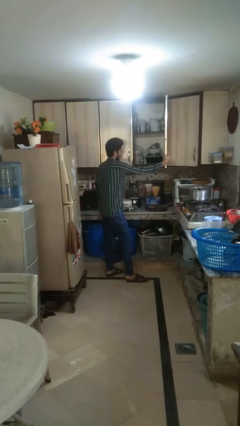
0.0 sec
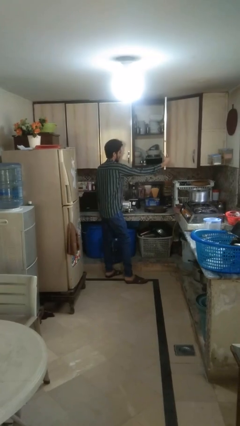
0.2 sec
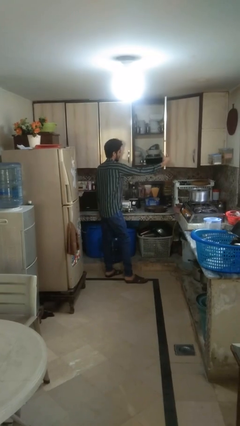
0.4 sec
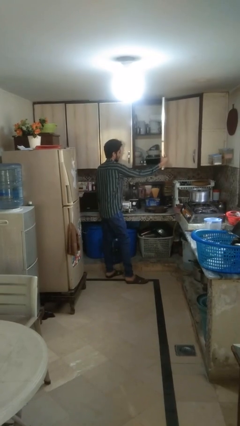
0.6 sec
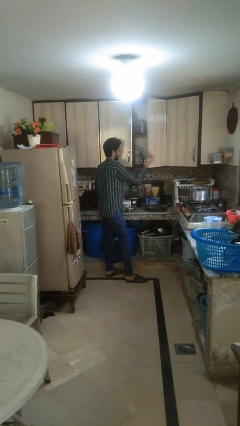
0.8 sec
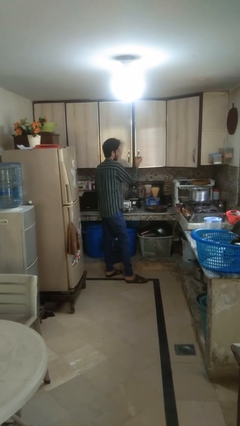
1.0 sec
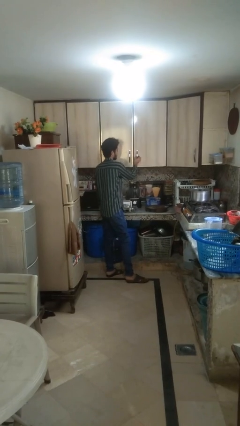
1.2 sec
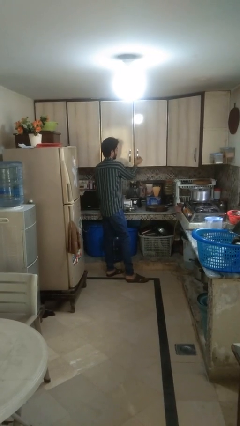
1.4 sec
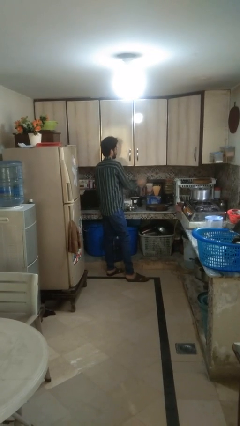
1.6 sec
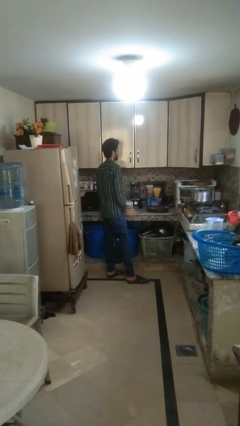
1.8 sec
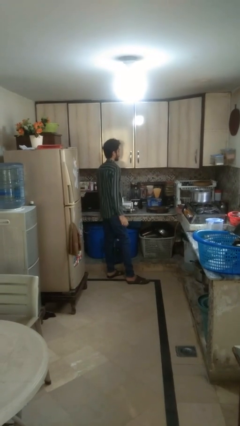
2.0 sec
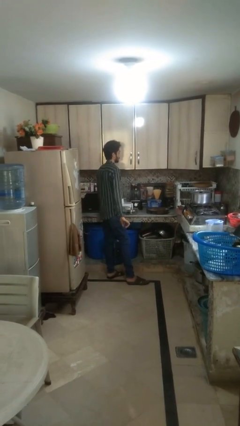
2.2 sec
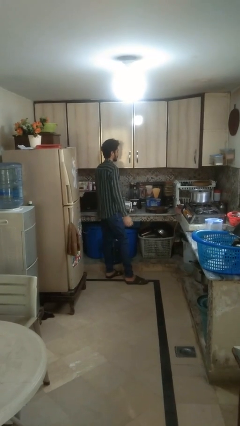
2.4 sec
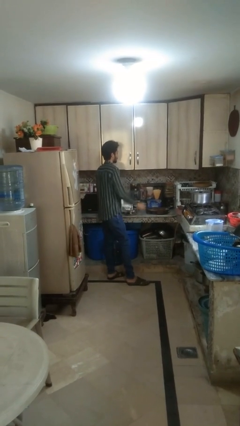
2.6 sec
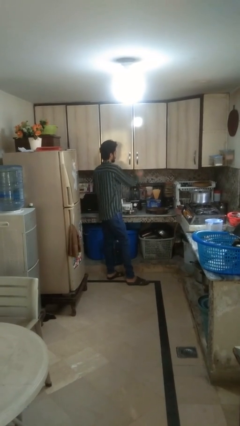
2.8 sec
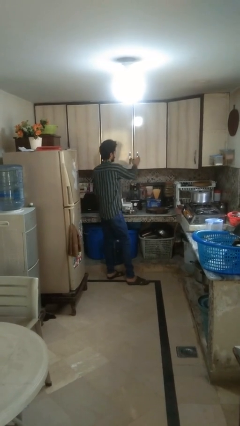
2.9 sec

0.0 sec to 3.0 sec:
person closes cabinet

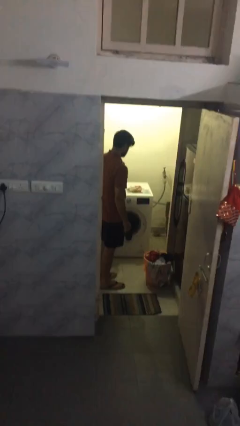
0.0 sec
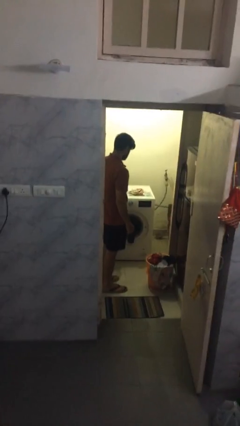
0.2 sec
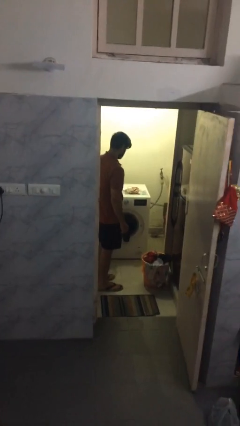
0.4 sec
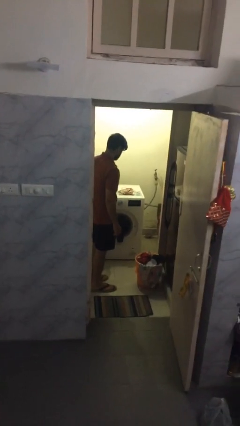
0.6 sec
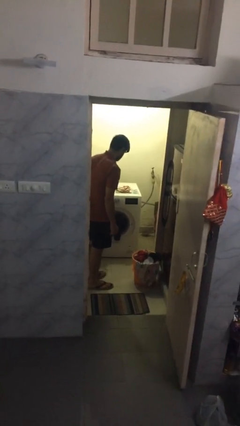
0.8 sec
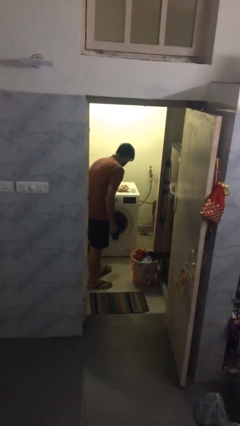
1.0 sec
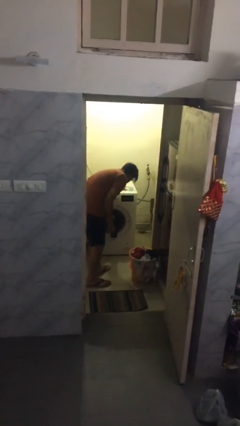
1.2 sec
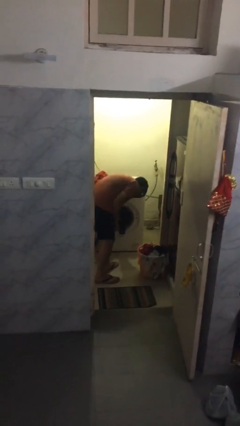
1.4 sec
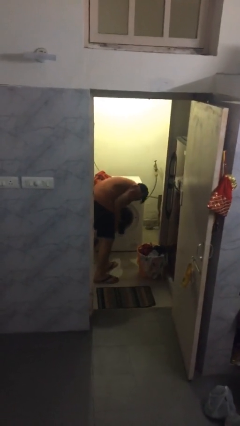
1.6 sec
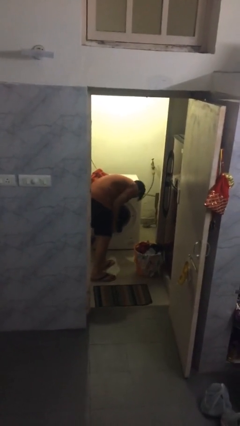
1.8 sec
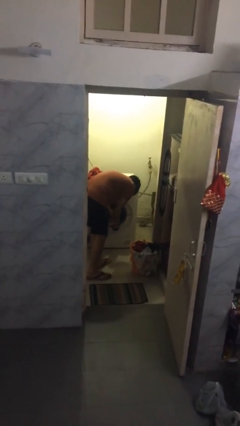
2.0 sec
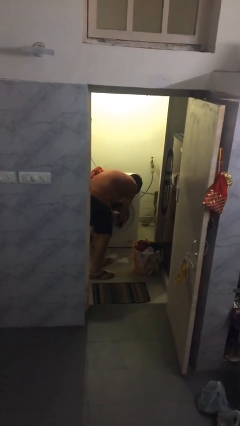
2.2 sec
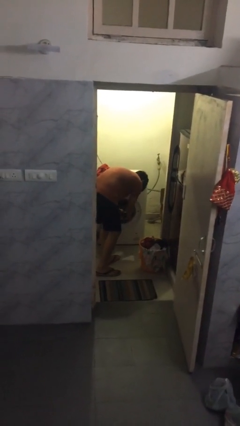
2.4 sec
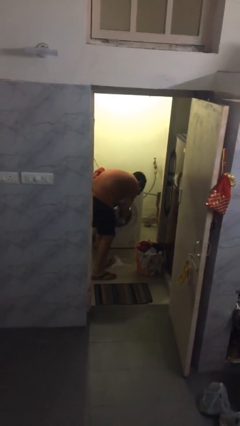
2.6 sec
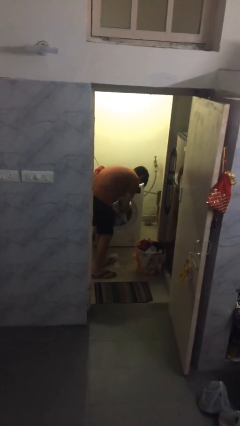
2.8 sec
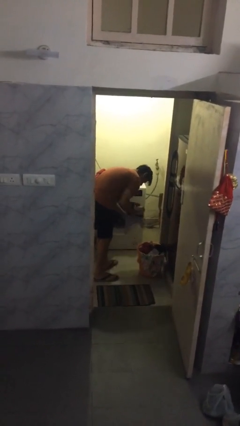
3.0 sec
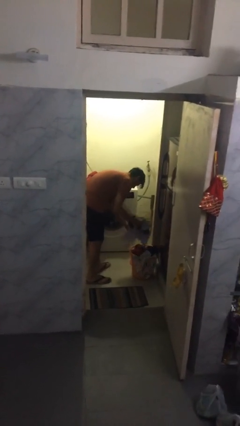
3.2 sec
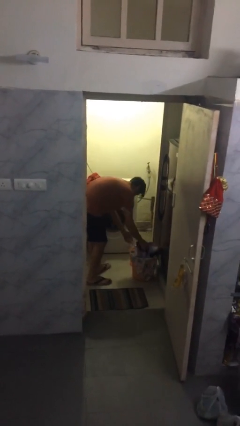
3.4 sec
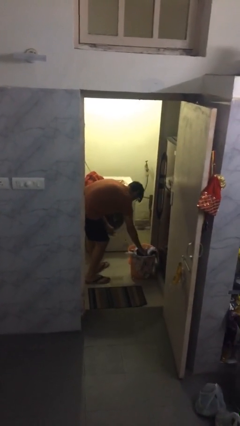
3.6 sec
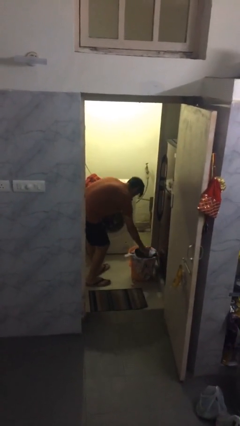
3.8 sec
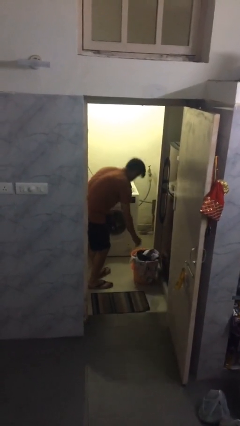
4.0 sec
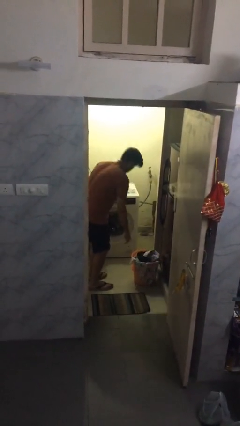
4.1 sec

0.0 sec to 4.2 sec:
person unloads clotheswasher

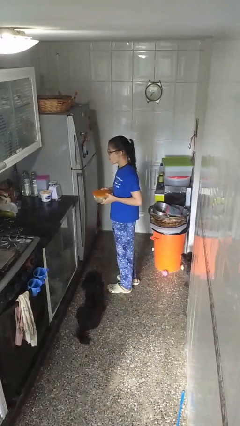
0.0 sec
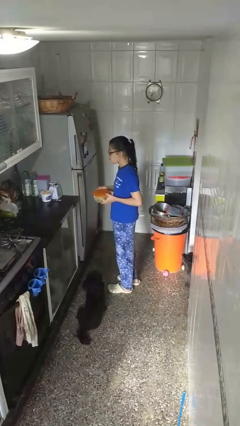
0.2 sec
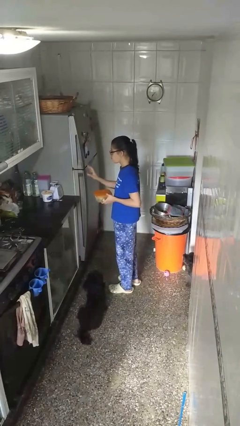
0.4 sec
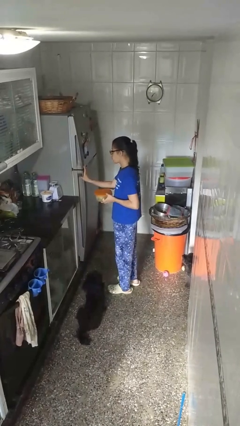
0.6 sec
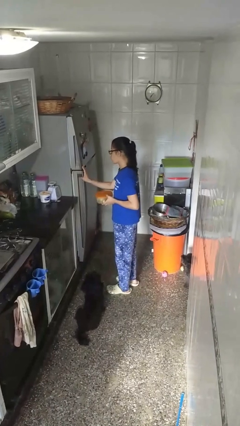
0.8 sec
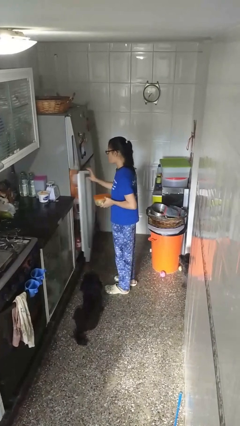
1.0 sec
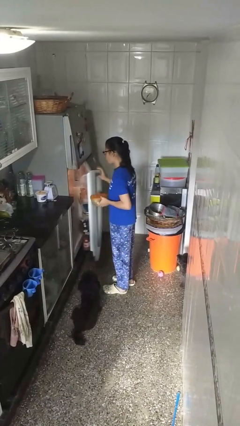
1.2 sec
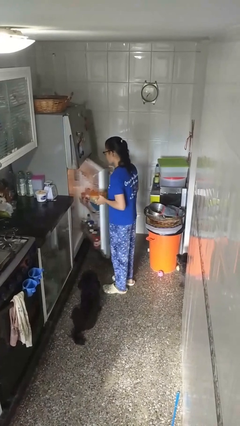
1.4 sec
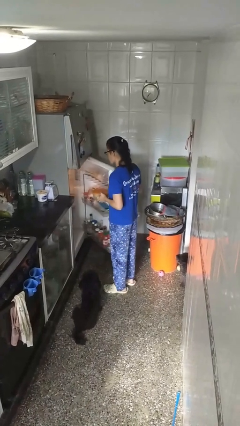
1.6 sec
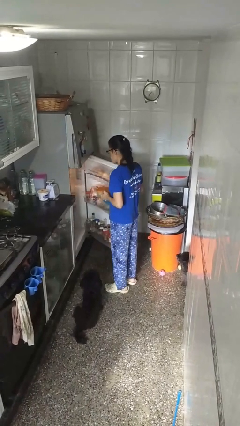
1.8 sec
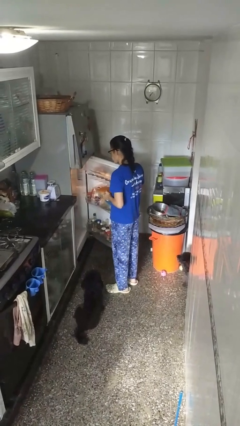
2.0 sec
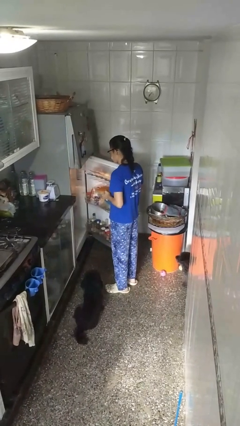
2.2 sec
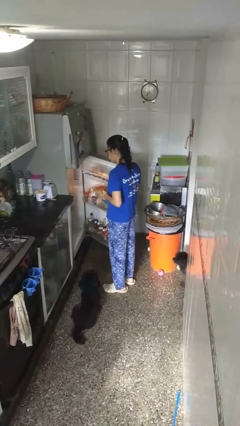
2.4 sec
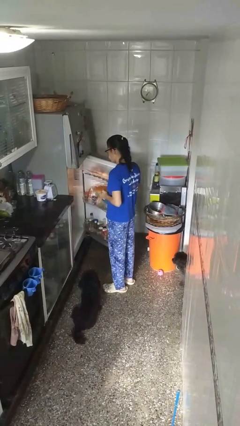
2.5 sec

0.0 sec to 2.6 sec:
person opens refrigerator

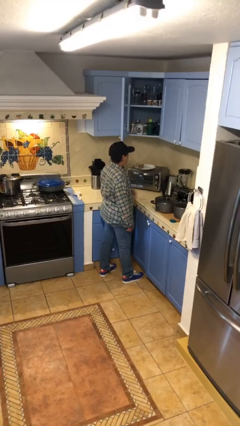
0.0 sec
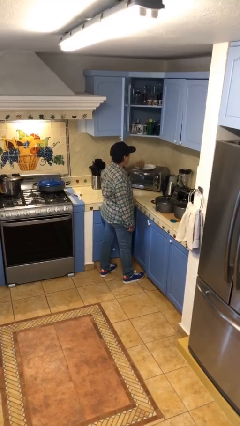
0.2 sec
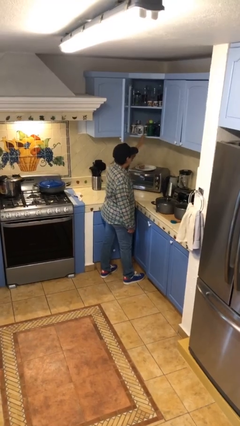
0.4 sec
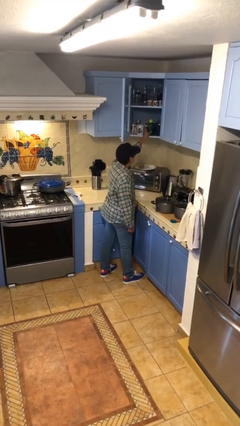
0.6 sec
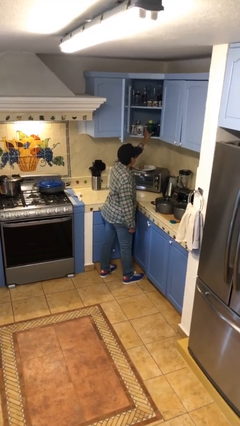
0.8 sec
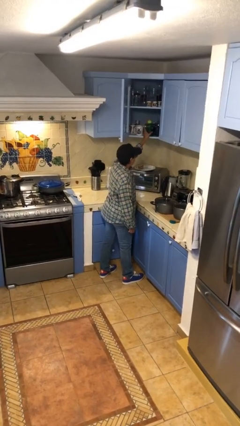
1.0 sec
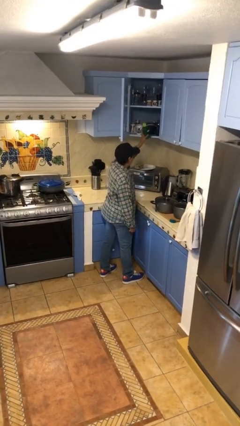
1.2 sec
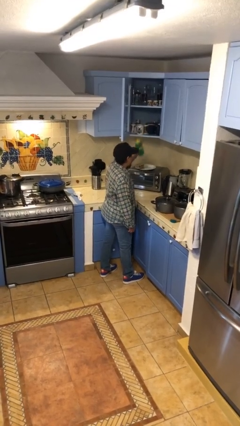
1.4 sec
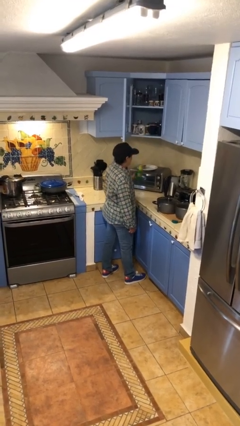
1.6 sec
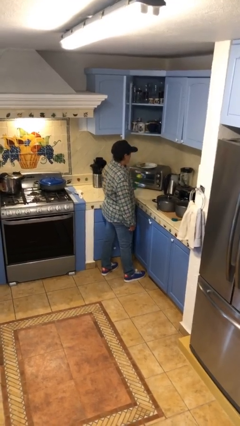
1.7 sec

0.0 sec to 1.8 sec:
person picks up object from cabinet

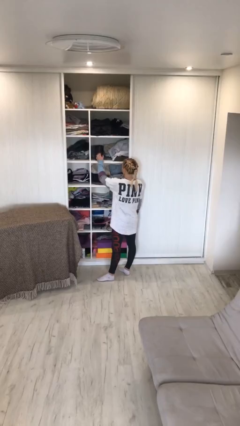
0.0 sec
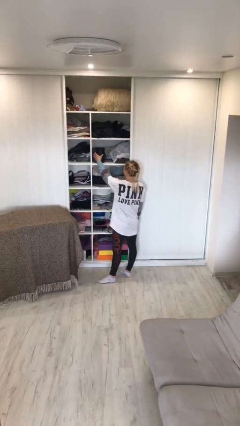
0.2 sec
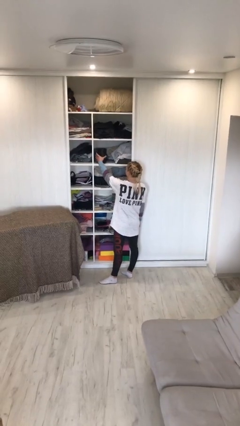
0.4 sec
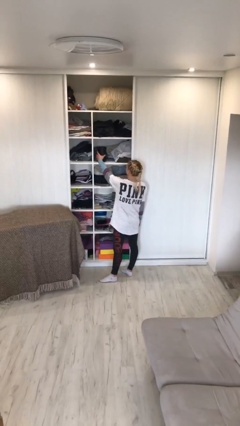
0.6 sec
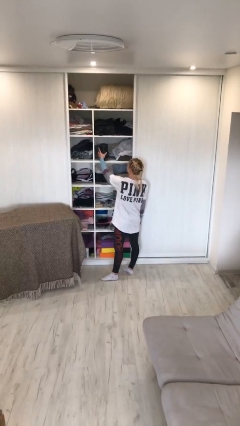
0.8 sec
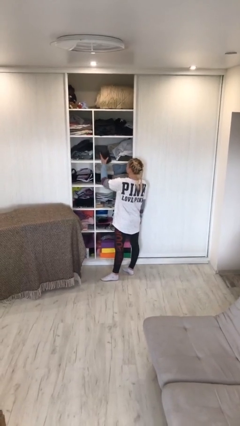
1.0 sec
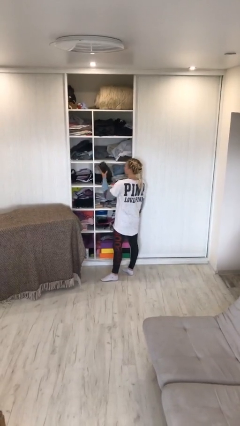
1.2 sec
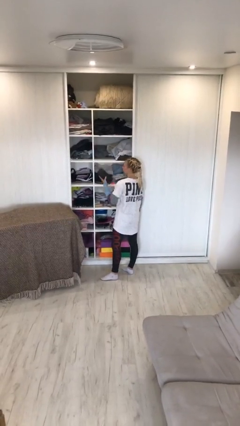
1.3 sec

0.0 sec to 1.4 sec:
person picks up object from shelf

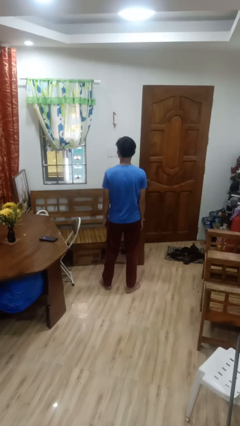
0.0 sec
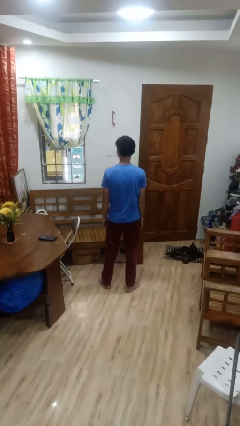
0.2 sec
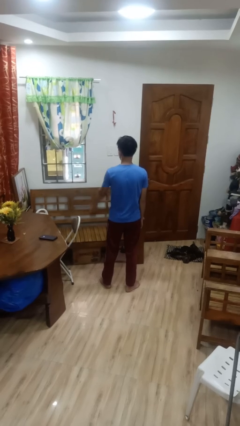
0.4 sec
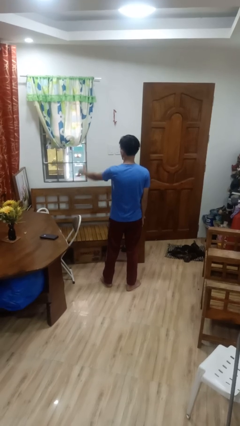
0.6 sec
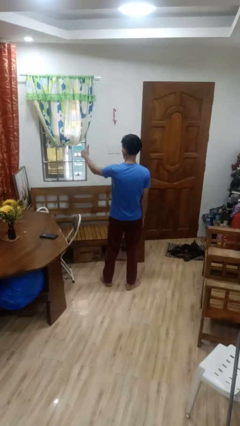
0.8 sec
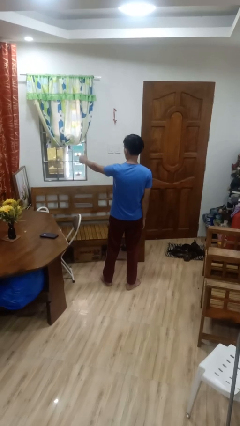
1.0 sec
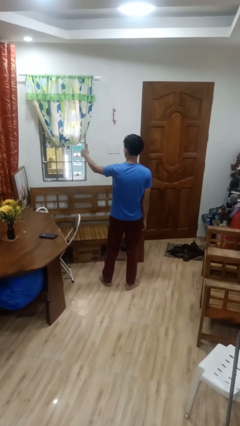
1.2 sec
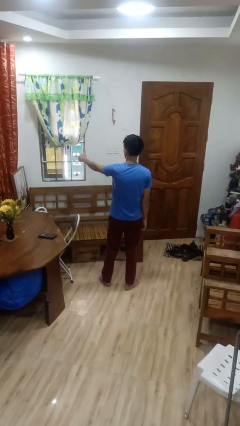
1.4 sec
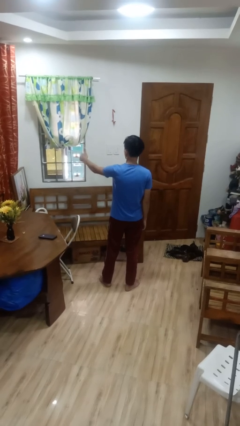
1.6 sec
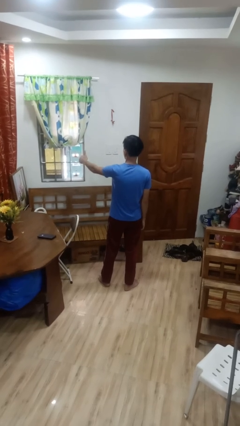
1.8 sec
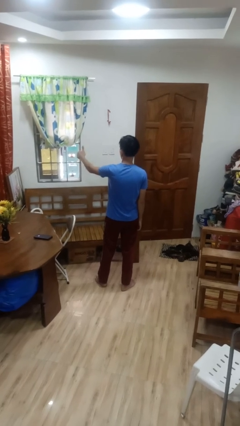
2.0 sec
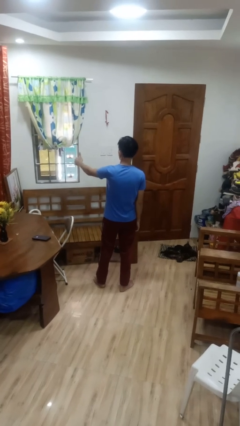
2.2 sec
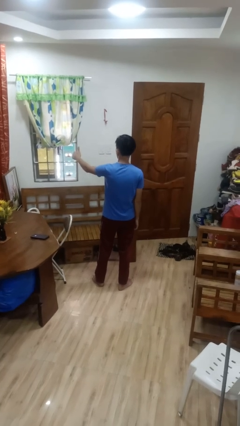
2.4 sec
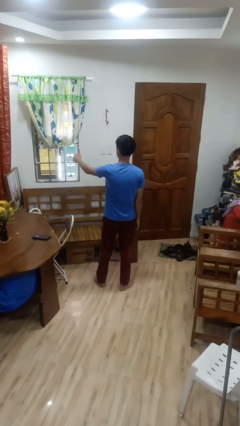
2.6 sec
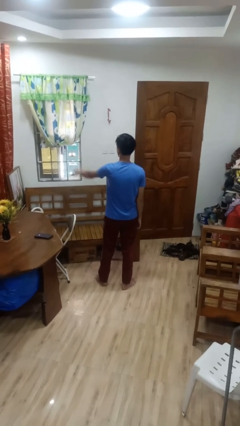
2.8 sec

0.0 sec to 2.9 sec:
person gestures thumbs up

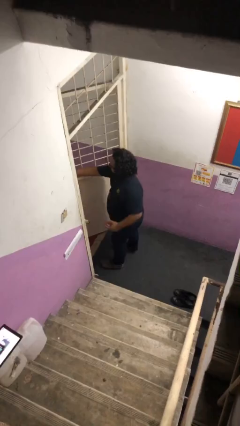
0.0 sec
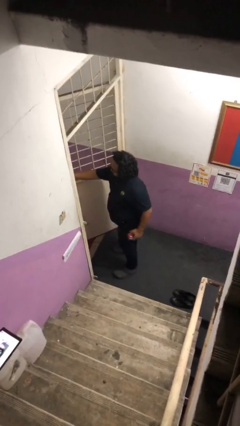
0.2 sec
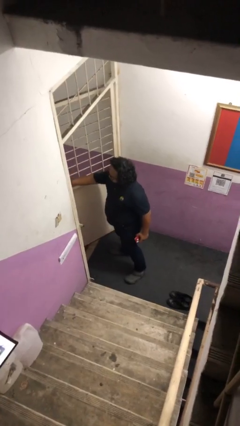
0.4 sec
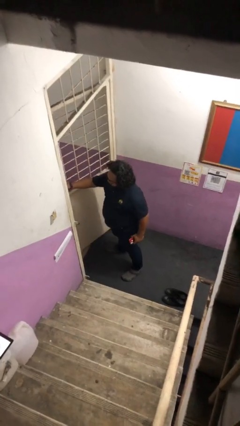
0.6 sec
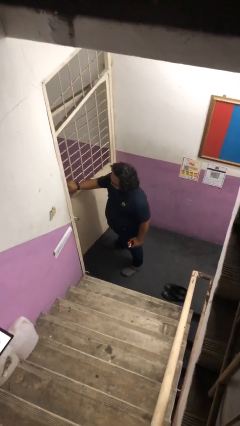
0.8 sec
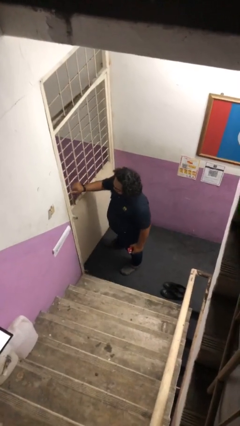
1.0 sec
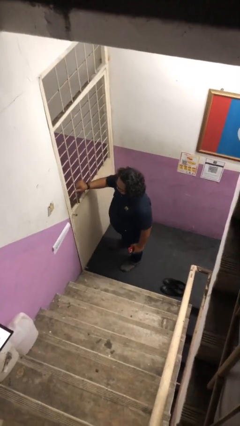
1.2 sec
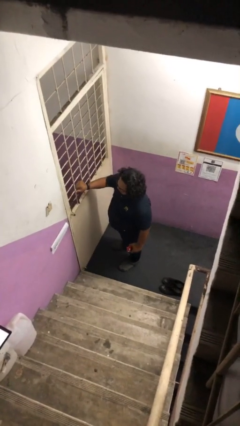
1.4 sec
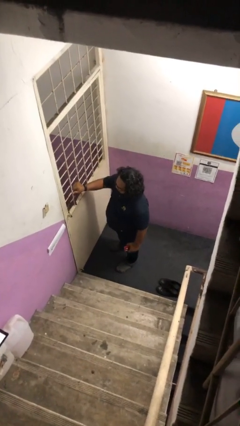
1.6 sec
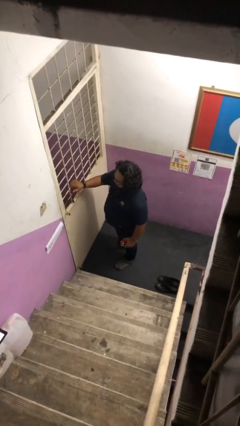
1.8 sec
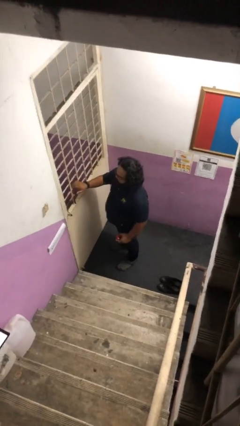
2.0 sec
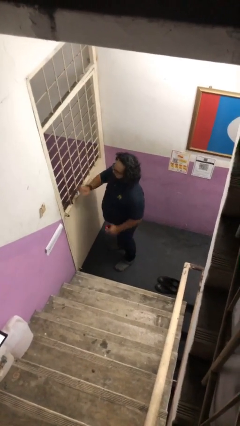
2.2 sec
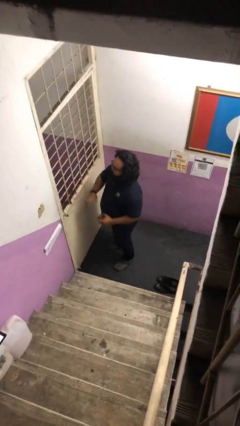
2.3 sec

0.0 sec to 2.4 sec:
person closes facility door
